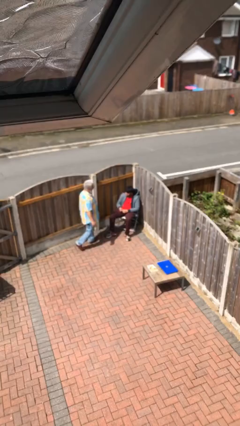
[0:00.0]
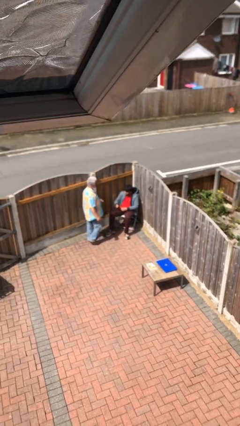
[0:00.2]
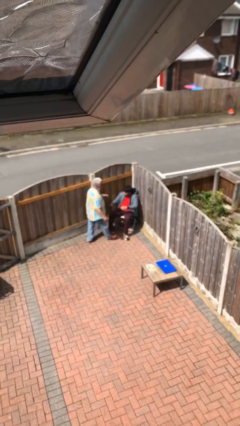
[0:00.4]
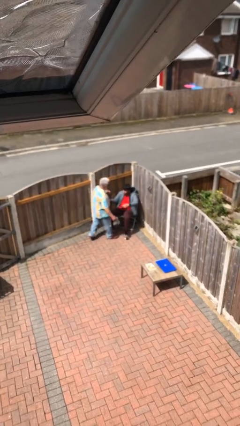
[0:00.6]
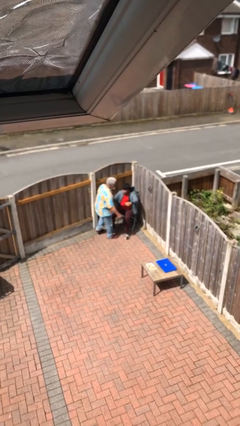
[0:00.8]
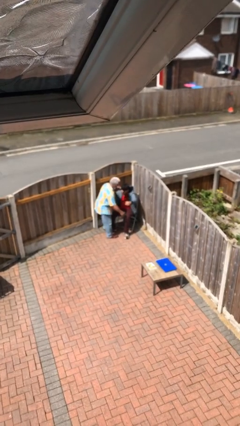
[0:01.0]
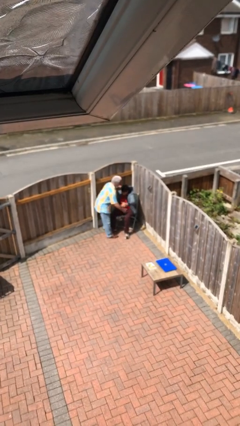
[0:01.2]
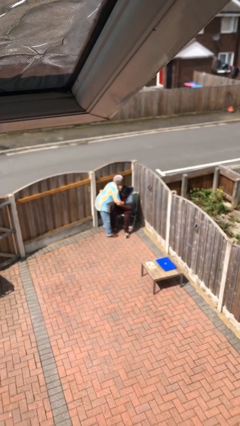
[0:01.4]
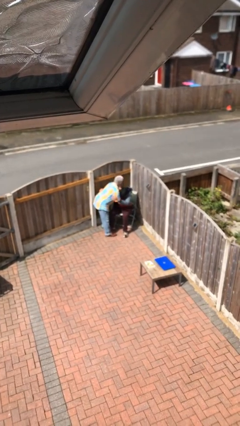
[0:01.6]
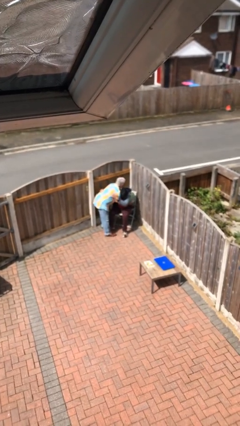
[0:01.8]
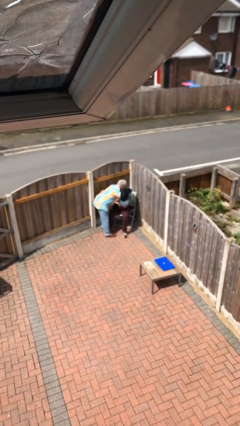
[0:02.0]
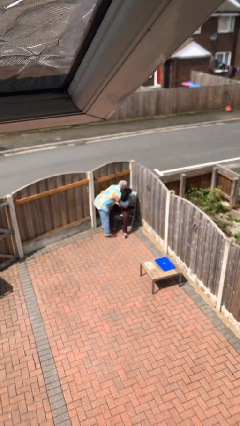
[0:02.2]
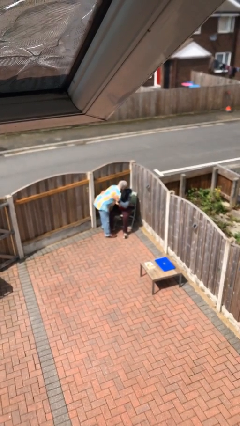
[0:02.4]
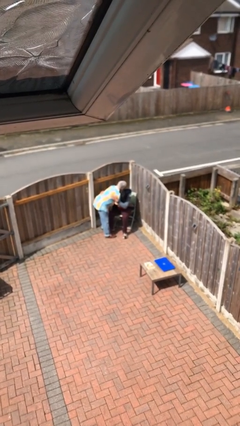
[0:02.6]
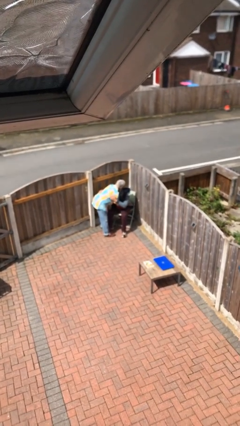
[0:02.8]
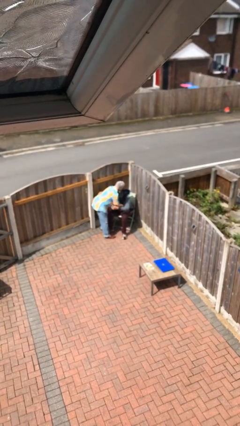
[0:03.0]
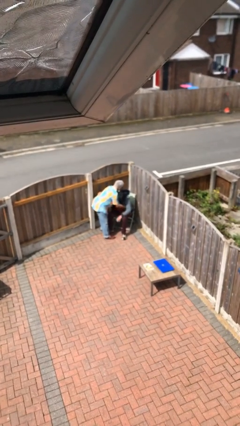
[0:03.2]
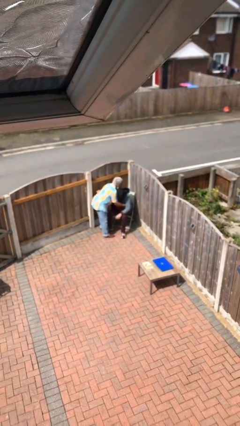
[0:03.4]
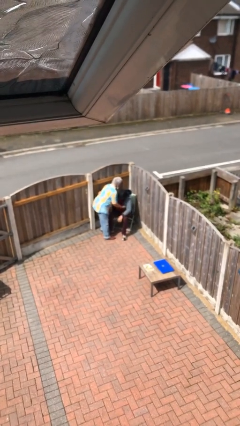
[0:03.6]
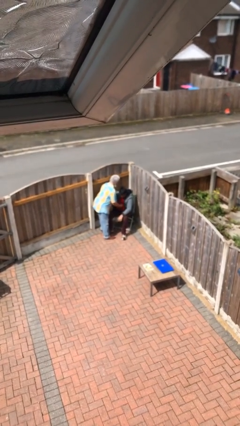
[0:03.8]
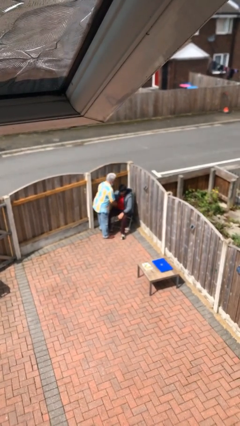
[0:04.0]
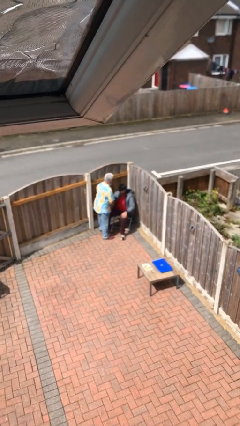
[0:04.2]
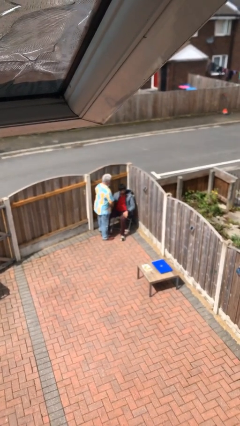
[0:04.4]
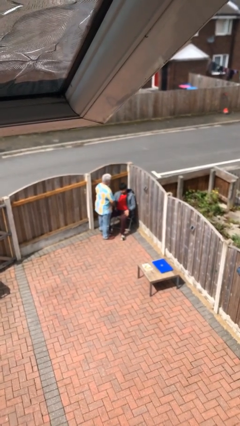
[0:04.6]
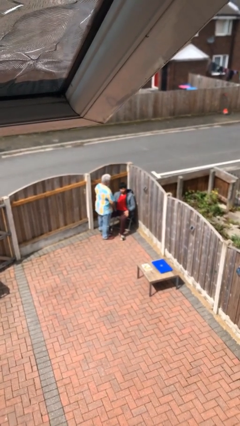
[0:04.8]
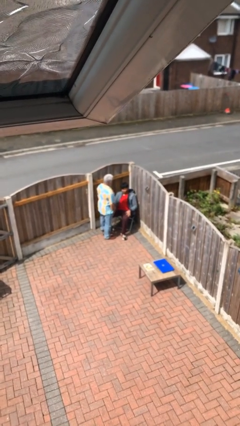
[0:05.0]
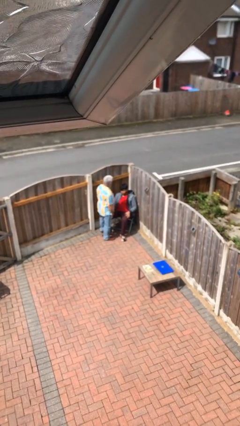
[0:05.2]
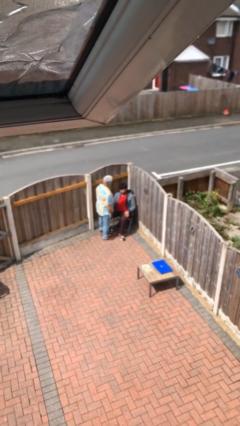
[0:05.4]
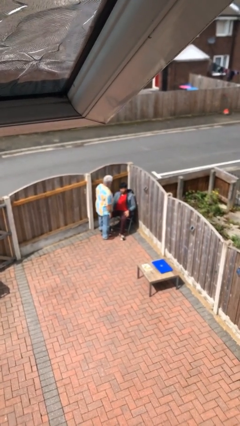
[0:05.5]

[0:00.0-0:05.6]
person embraces person

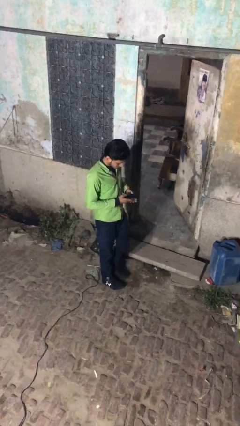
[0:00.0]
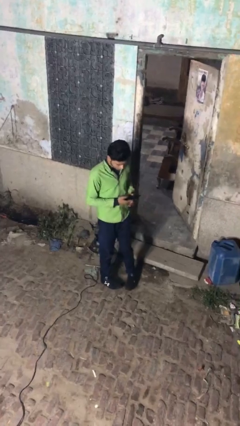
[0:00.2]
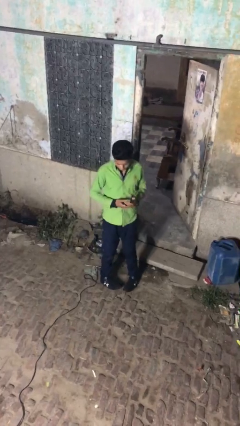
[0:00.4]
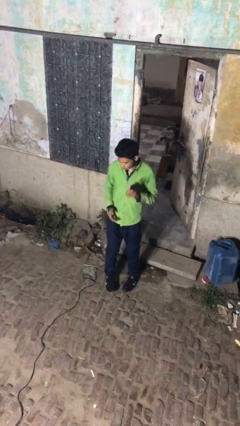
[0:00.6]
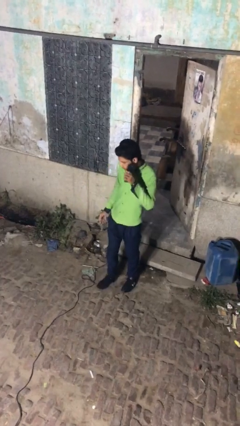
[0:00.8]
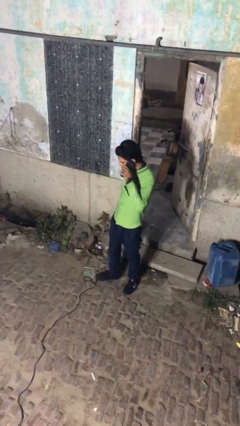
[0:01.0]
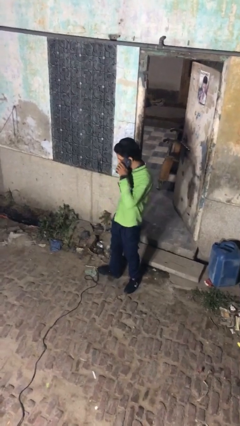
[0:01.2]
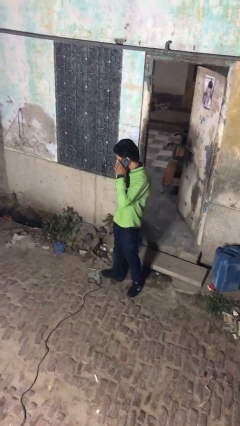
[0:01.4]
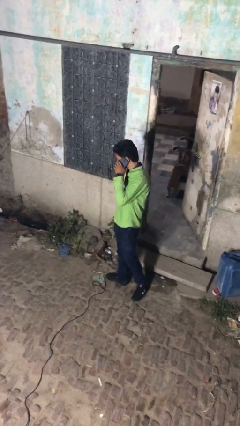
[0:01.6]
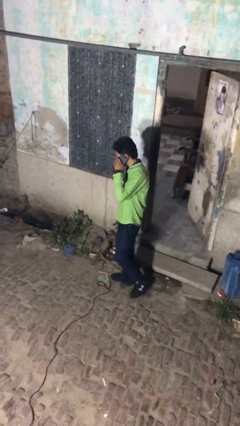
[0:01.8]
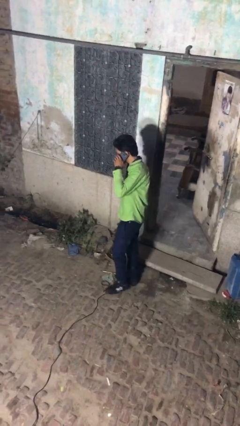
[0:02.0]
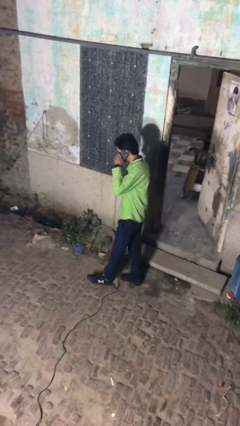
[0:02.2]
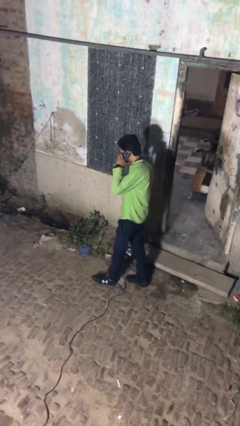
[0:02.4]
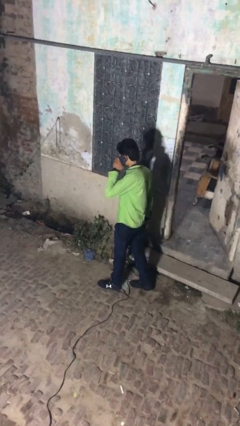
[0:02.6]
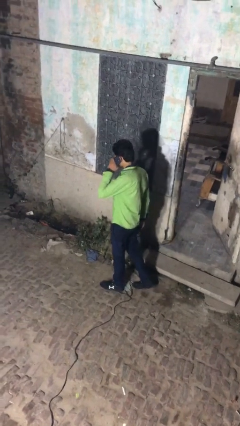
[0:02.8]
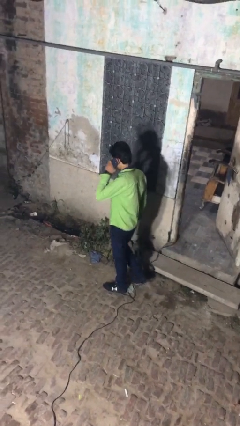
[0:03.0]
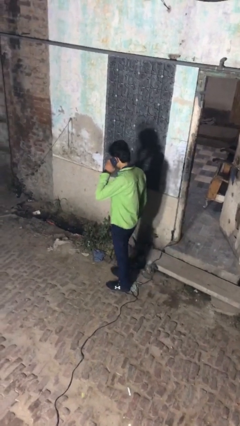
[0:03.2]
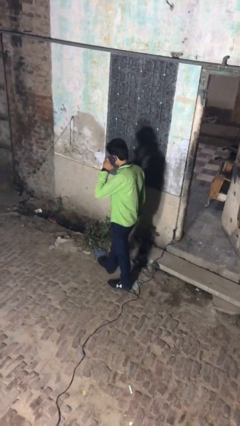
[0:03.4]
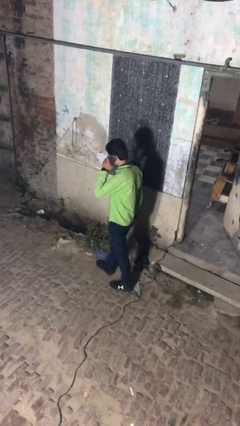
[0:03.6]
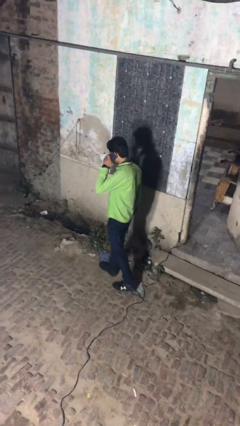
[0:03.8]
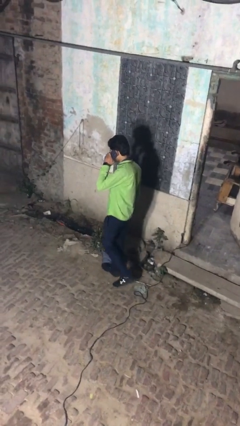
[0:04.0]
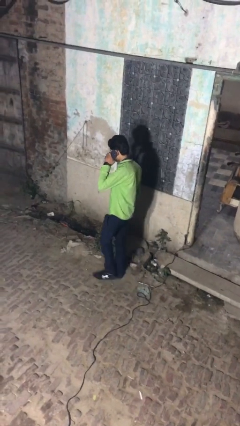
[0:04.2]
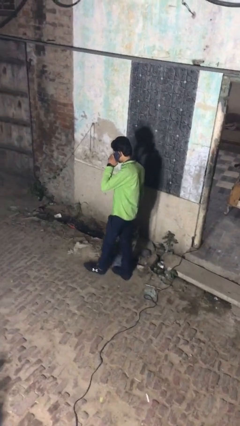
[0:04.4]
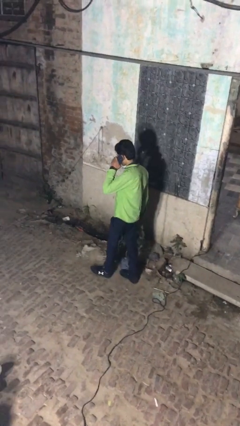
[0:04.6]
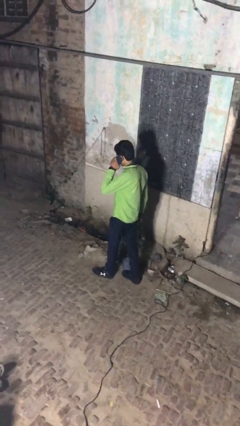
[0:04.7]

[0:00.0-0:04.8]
person talks on phone

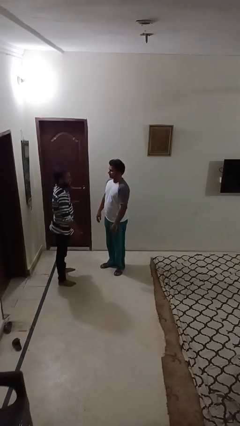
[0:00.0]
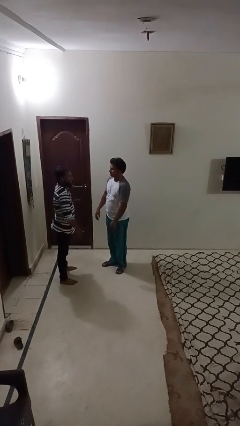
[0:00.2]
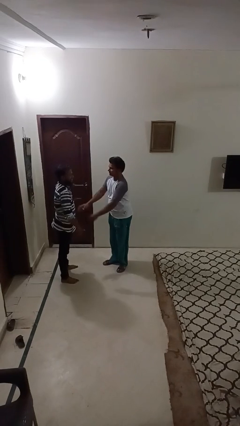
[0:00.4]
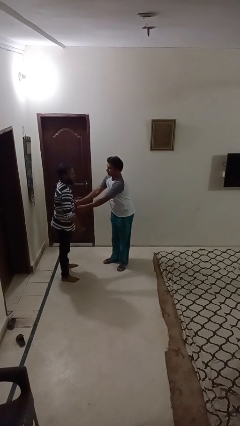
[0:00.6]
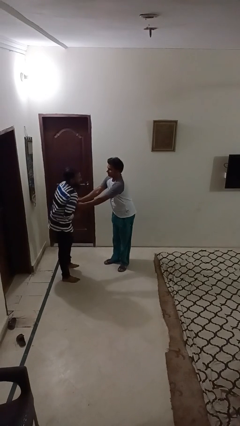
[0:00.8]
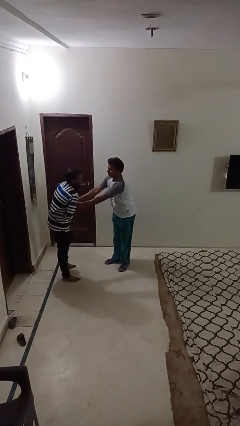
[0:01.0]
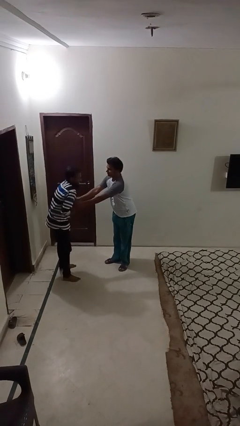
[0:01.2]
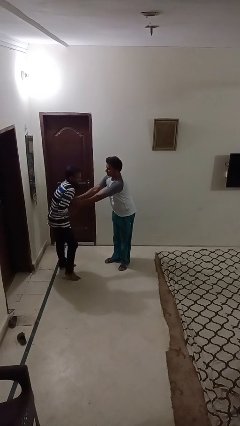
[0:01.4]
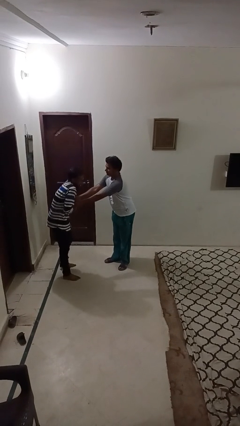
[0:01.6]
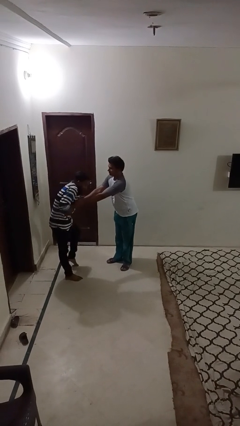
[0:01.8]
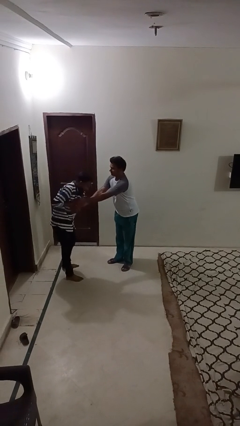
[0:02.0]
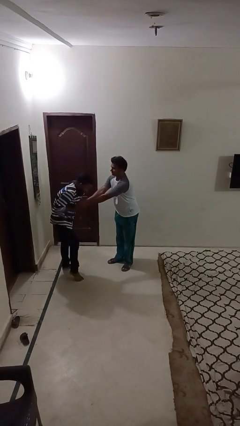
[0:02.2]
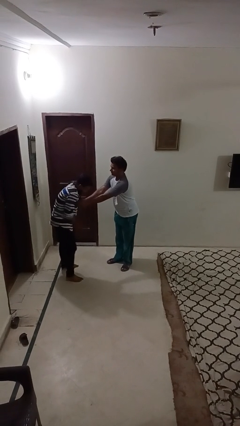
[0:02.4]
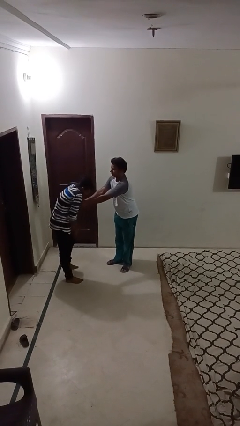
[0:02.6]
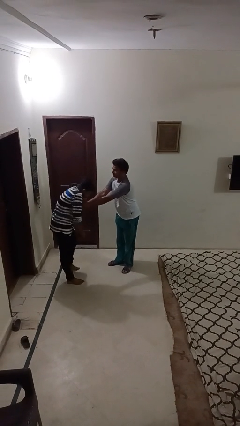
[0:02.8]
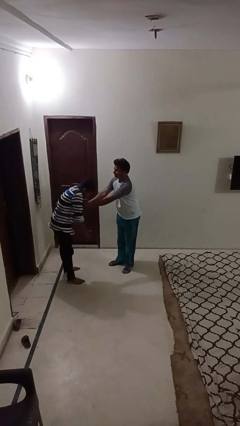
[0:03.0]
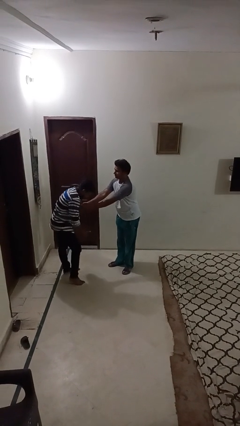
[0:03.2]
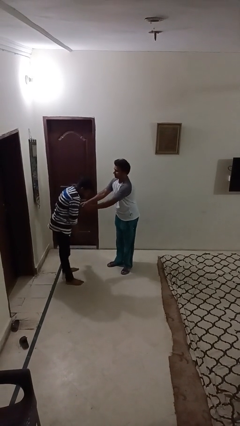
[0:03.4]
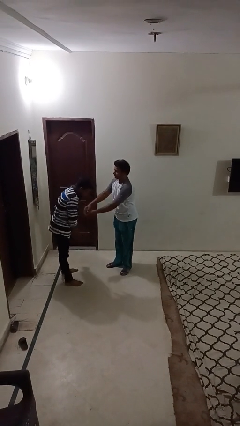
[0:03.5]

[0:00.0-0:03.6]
person tickles person

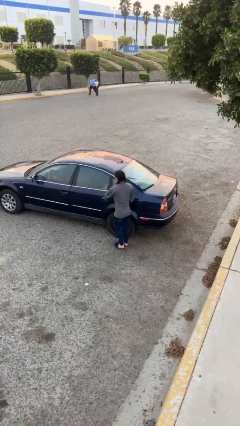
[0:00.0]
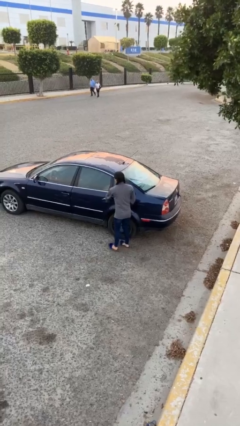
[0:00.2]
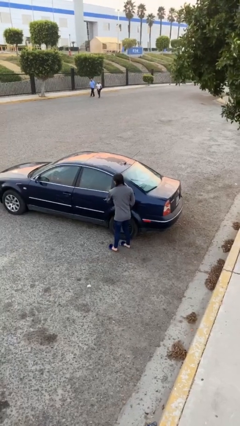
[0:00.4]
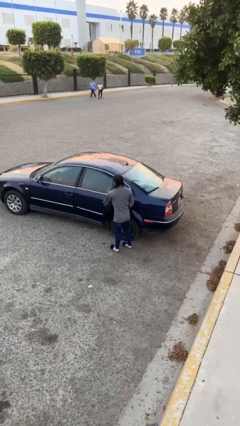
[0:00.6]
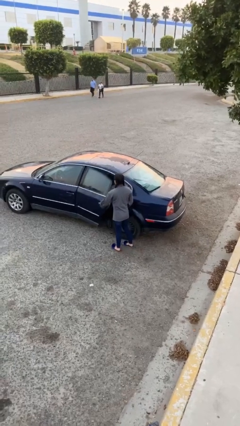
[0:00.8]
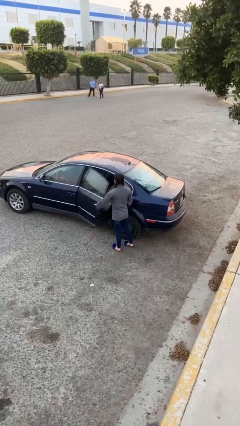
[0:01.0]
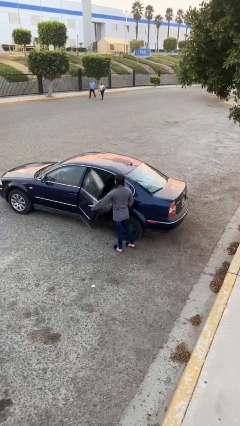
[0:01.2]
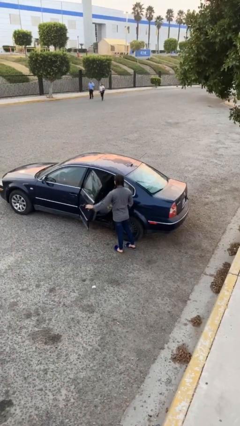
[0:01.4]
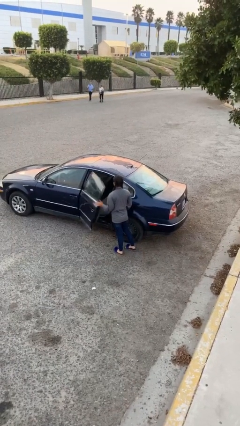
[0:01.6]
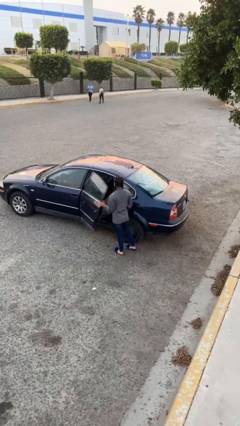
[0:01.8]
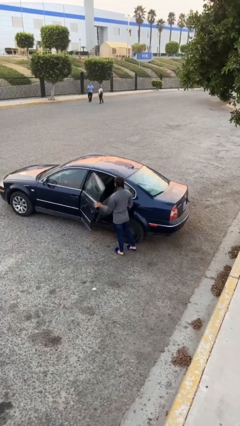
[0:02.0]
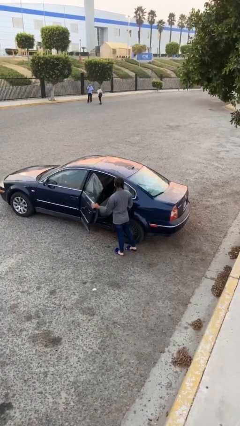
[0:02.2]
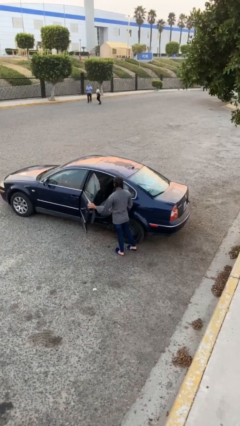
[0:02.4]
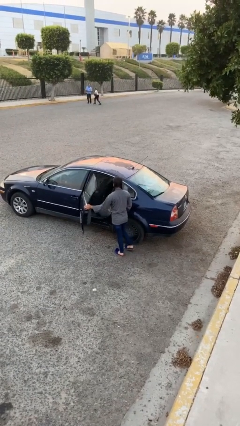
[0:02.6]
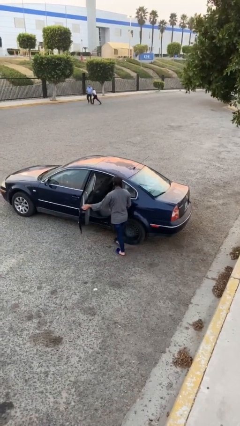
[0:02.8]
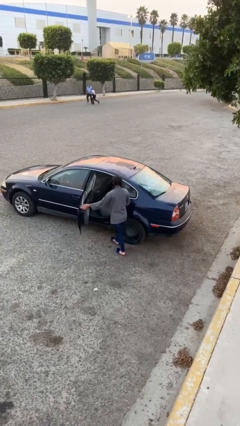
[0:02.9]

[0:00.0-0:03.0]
person opens car door

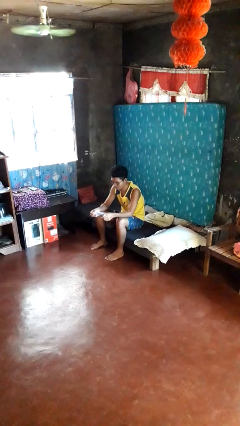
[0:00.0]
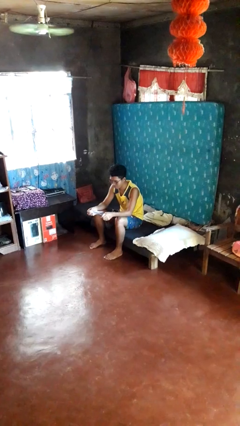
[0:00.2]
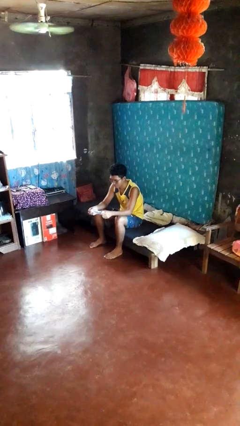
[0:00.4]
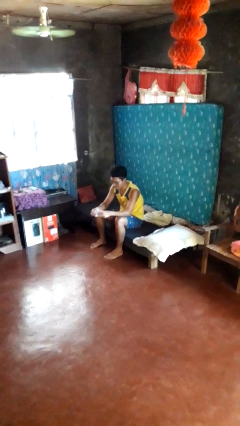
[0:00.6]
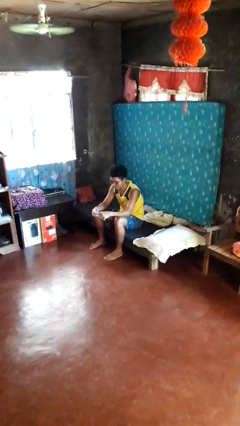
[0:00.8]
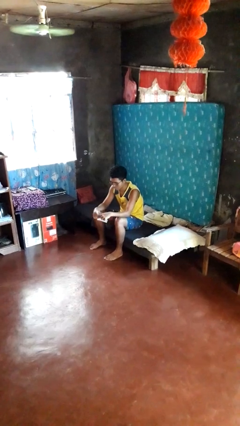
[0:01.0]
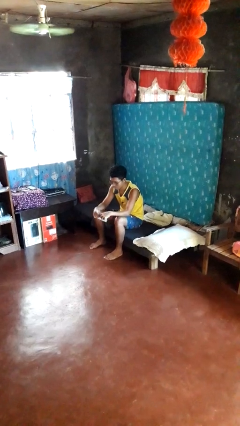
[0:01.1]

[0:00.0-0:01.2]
person tears paper
